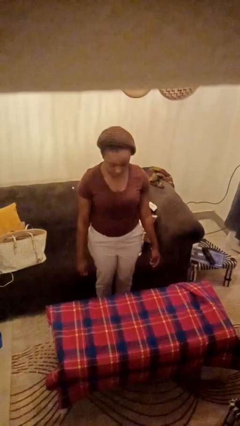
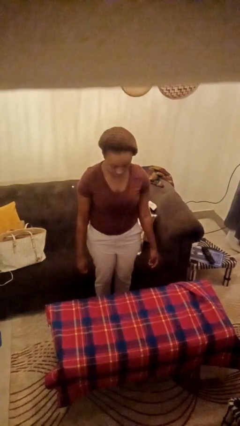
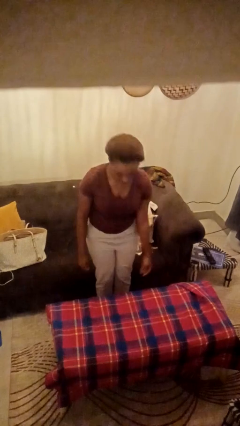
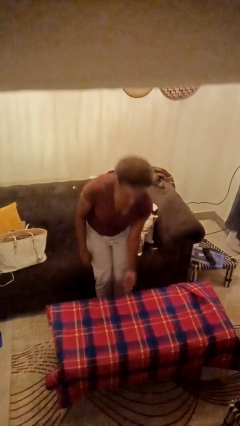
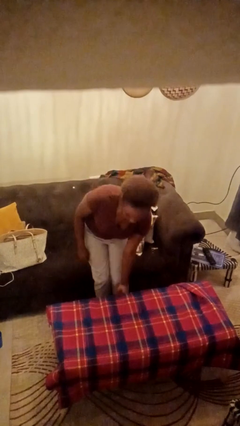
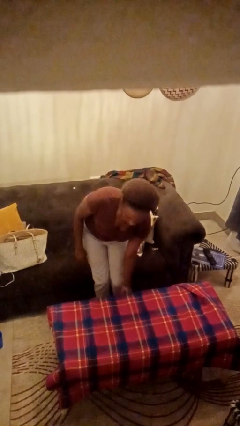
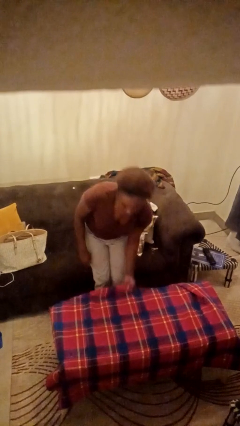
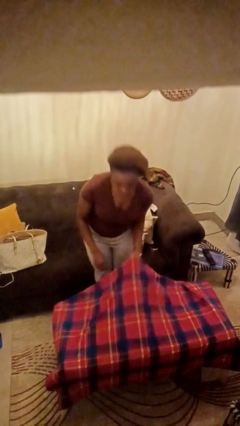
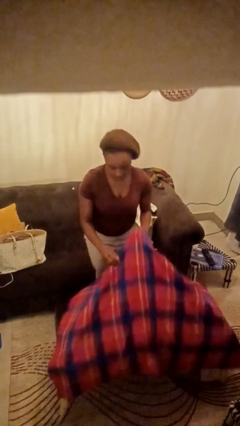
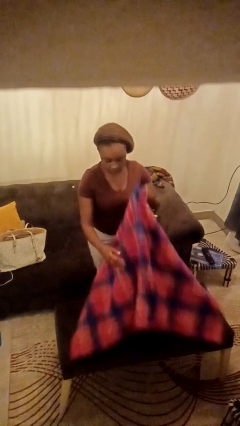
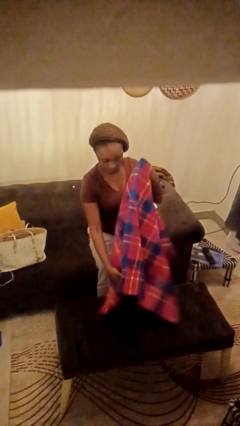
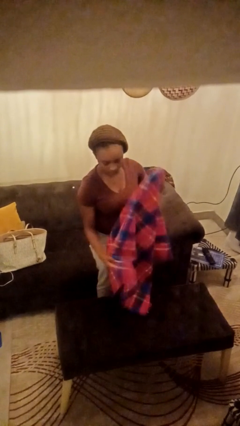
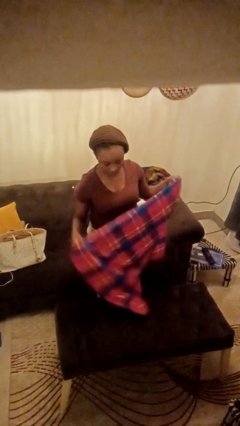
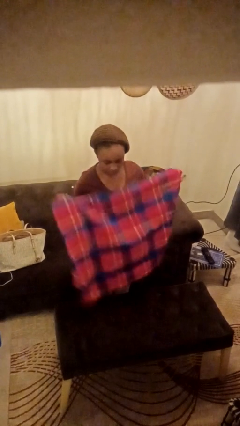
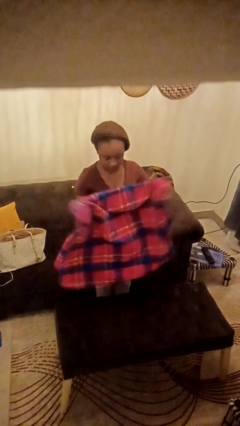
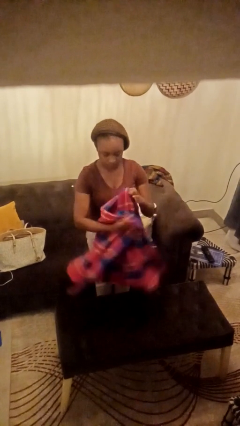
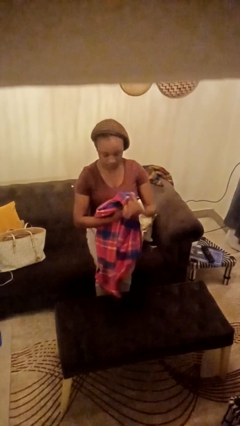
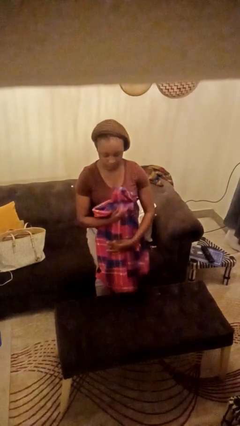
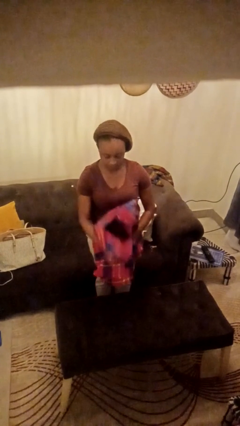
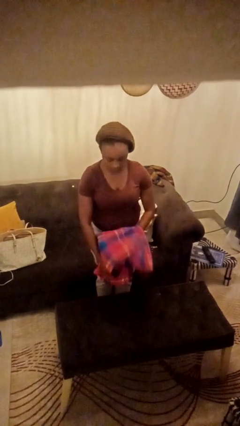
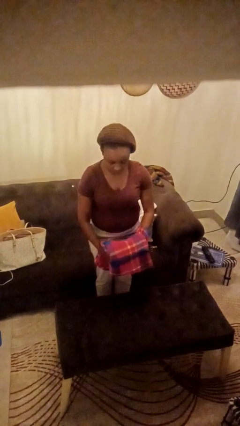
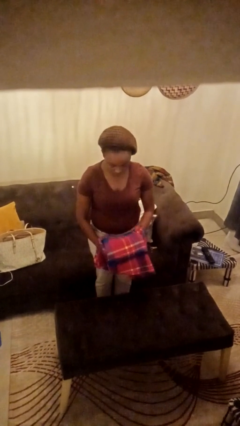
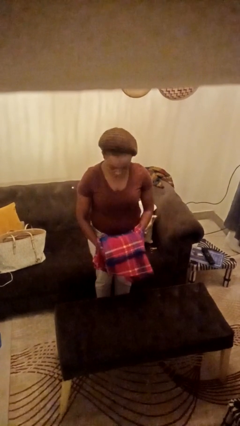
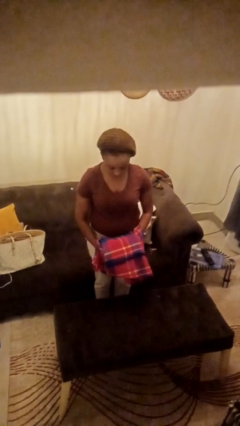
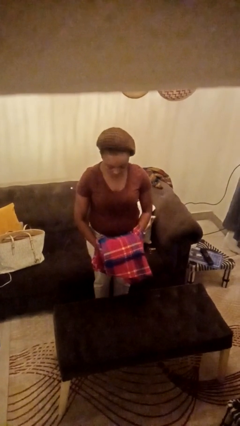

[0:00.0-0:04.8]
person folds tablecloth

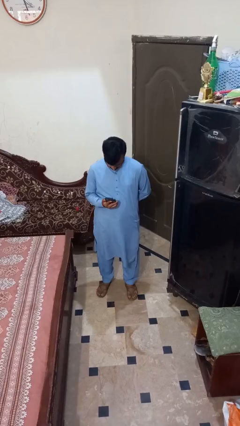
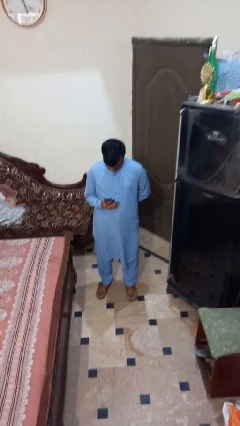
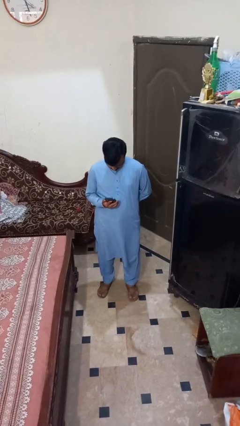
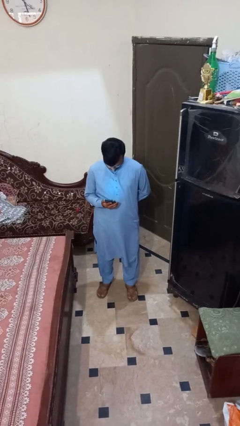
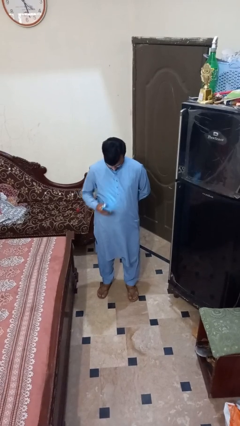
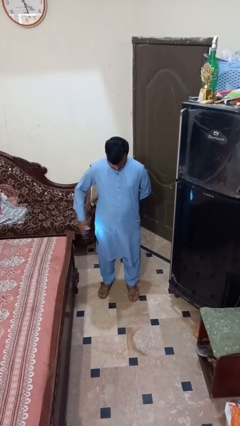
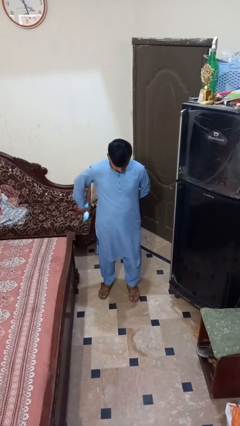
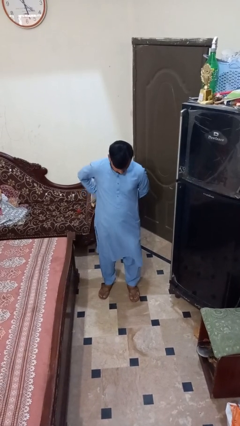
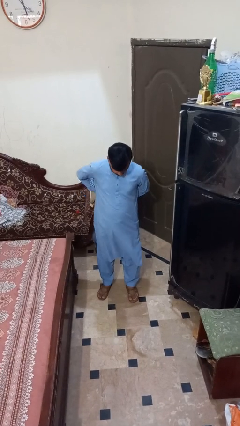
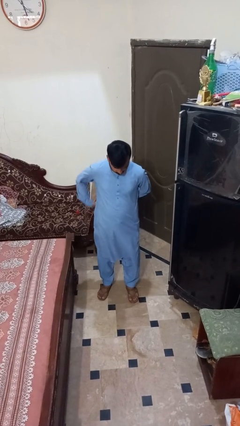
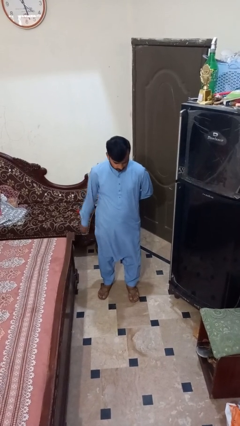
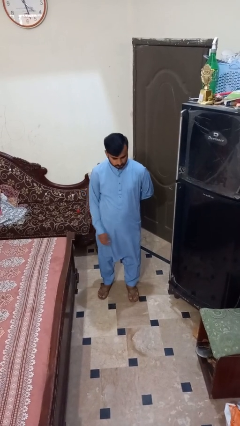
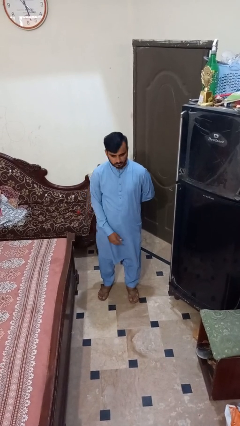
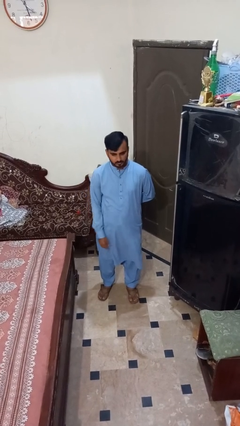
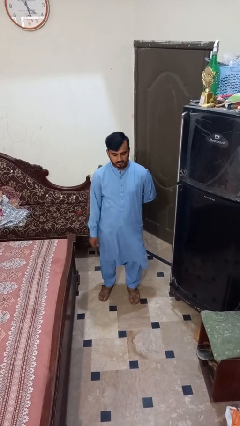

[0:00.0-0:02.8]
person puts phone into pocket

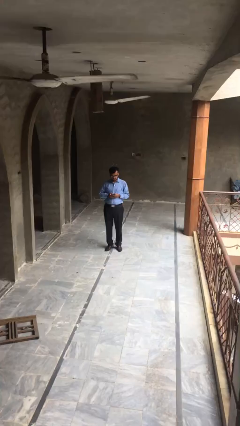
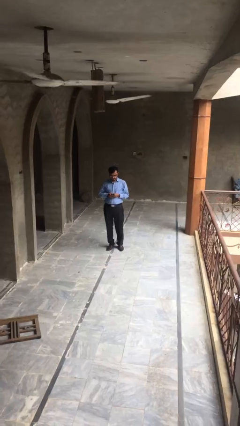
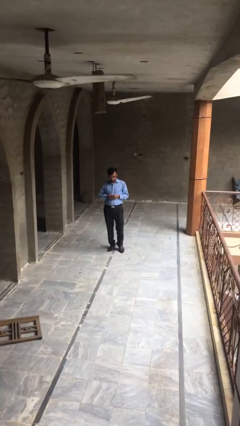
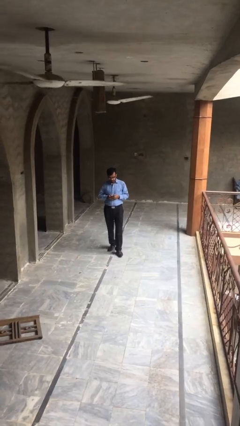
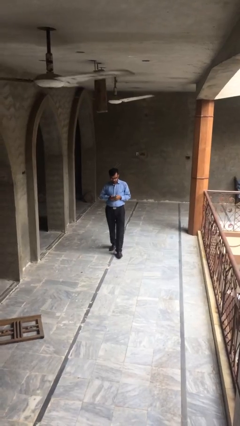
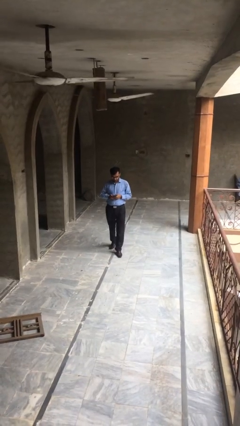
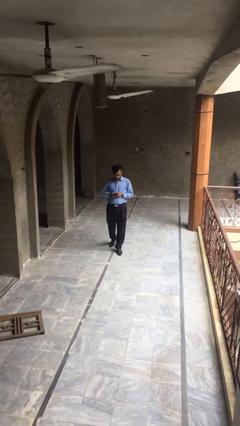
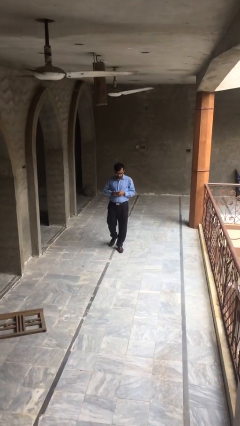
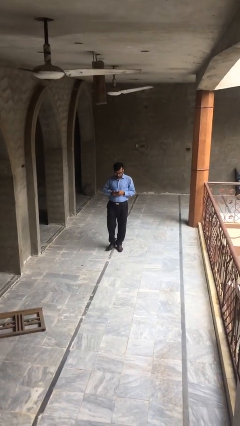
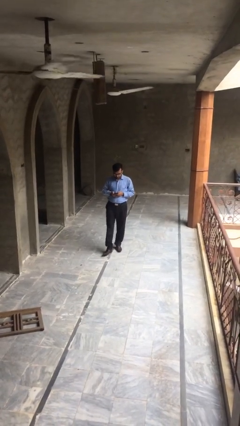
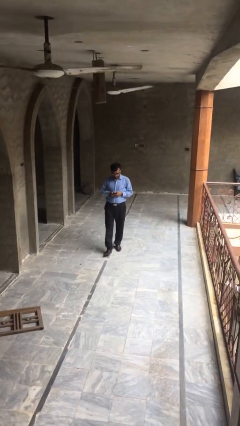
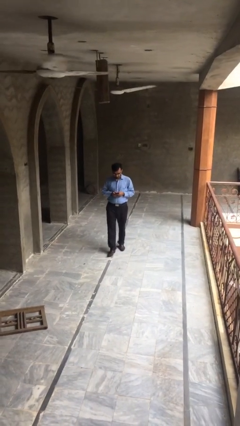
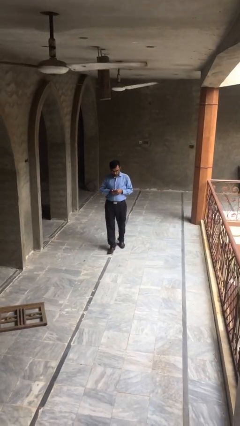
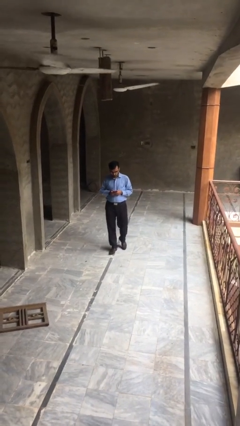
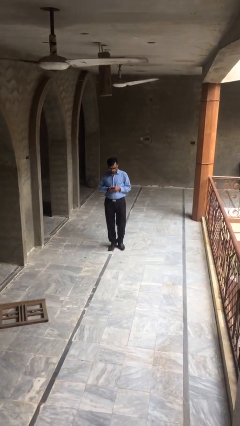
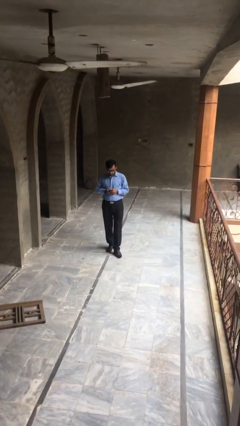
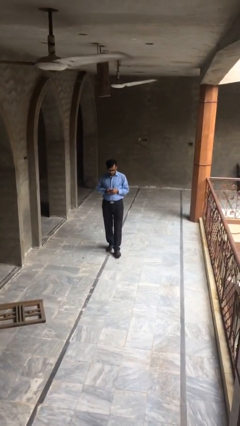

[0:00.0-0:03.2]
person texts on phone

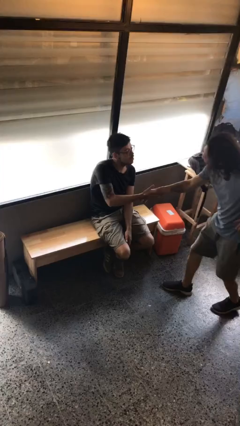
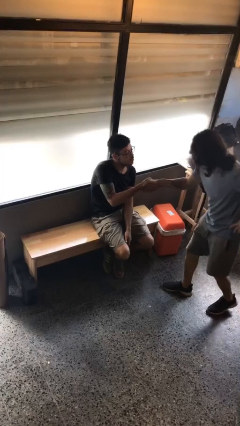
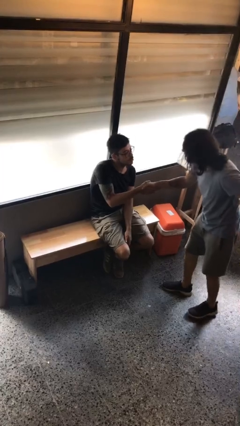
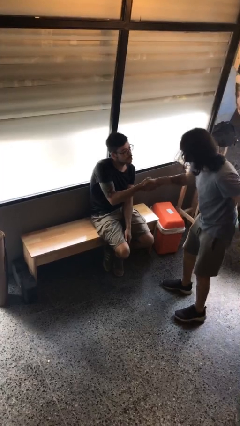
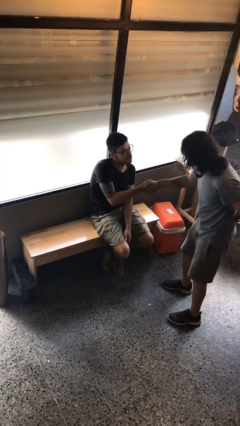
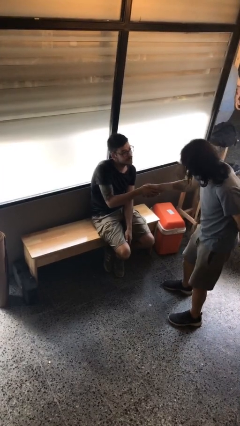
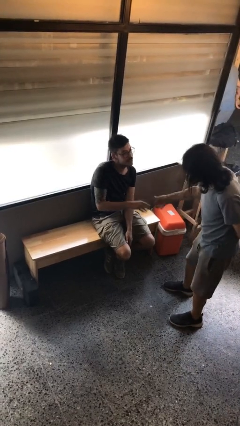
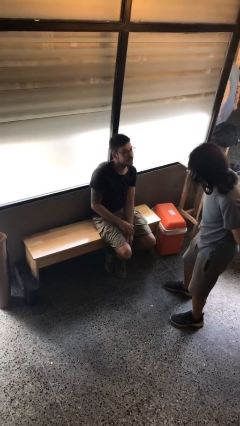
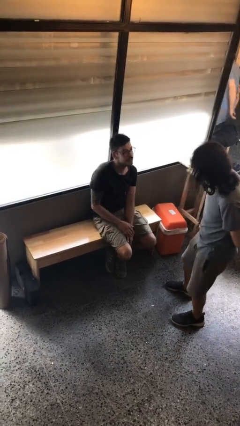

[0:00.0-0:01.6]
person shakes hand

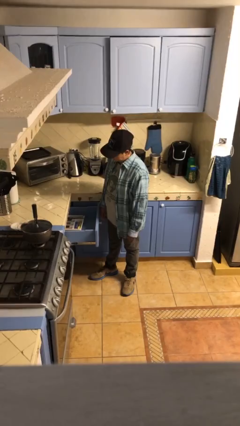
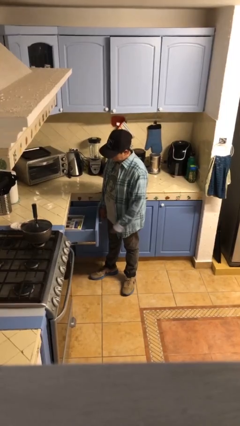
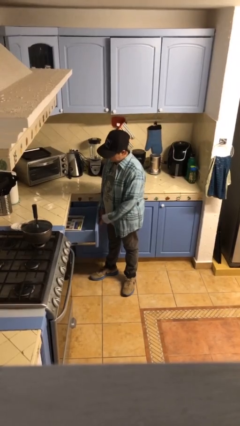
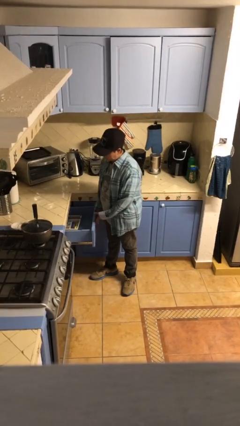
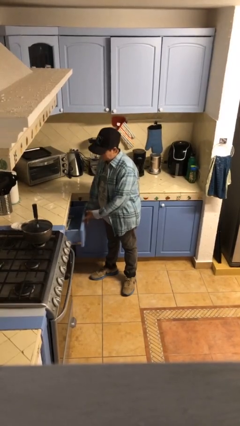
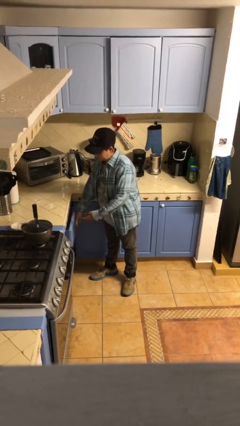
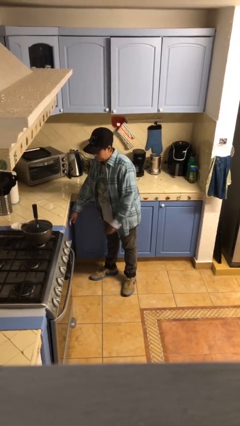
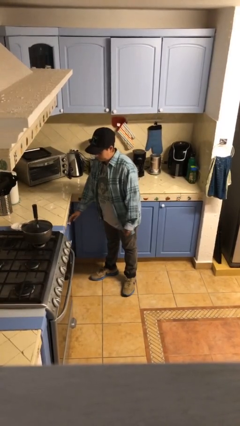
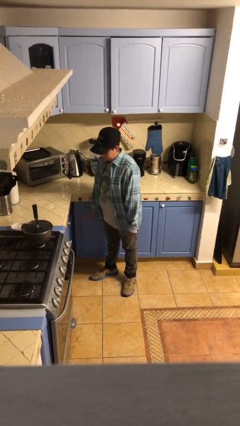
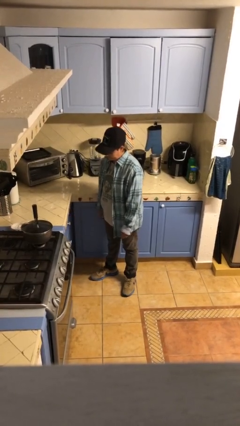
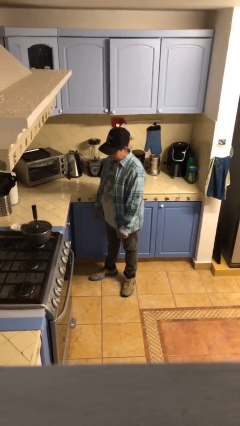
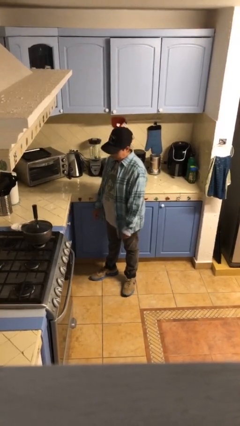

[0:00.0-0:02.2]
person closes kitchen drawer

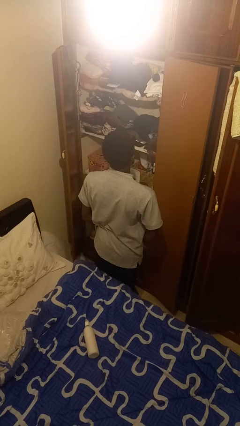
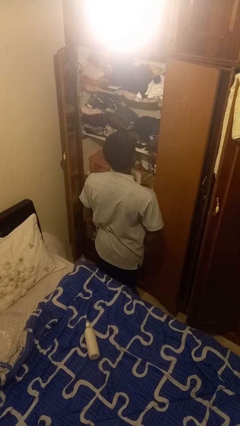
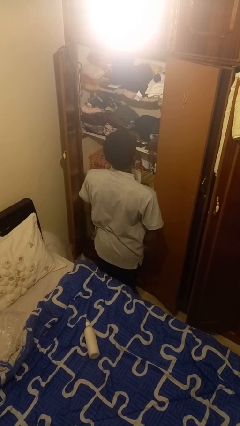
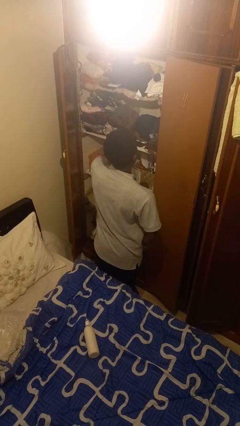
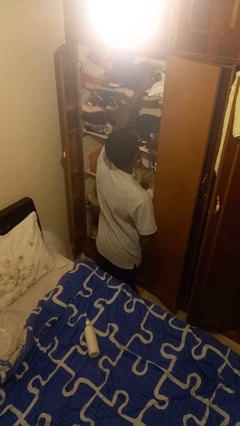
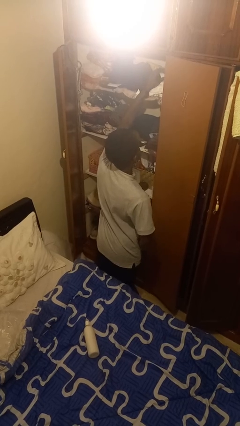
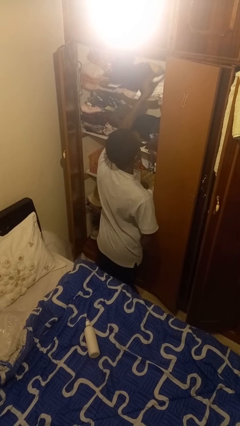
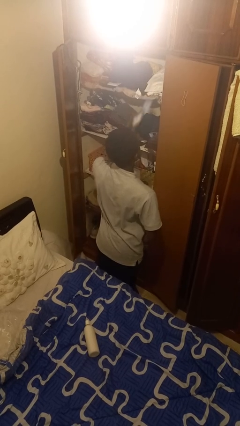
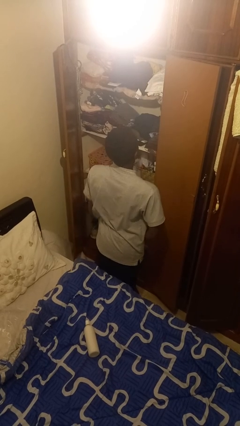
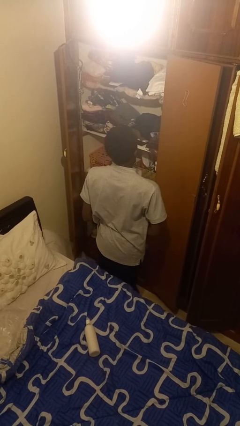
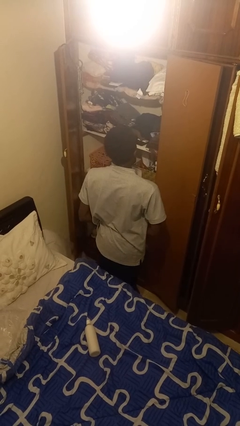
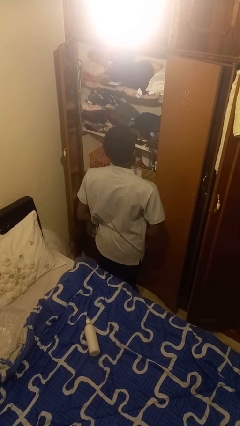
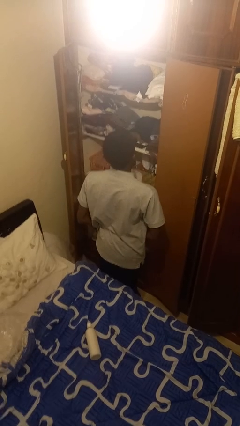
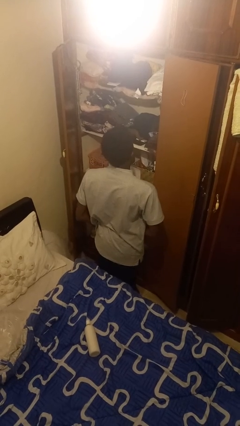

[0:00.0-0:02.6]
person picks up object from shelf

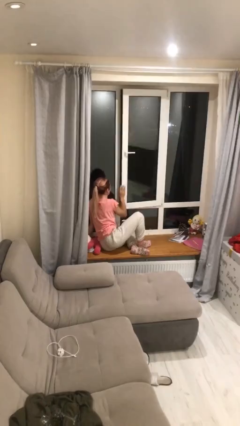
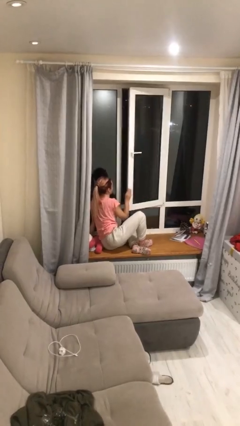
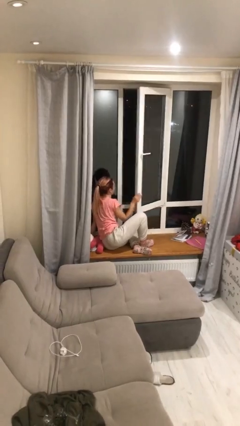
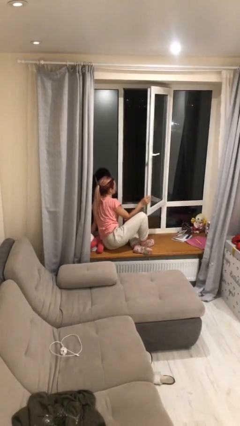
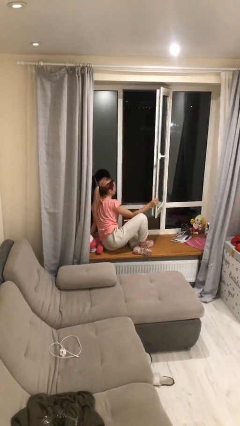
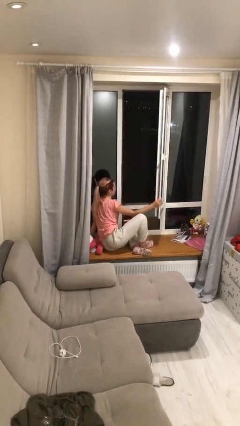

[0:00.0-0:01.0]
person opens home window
